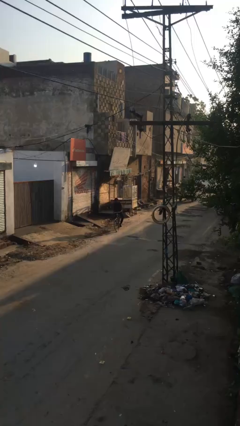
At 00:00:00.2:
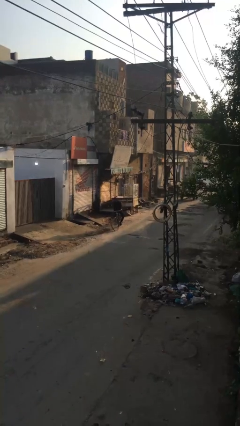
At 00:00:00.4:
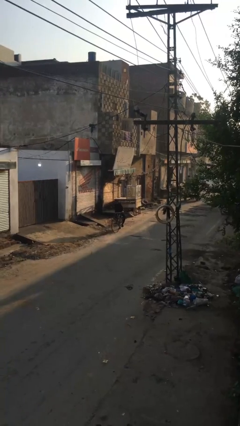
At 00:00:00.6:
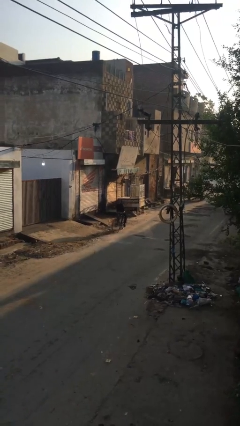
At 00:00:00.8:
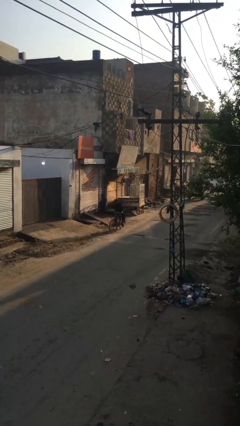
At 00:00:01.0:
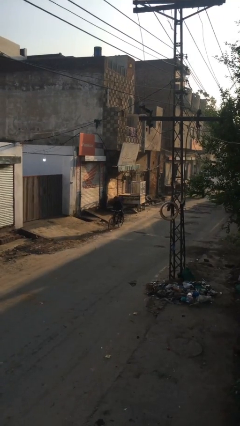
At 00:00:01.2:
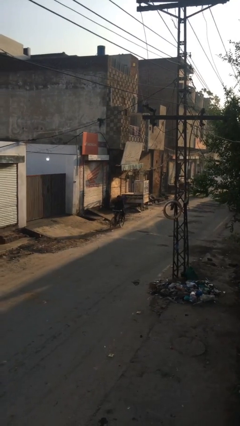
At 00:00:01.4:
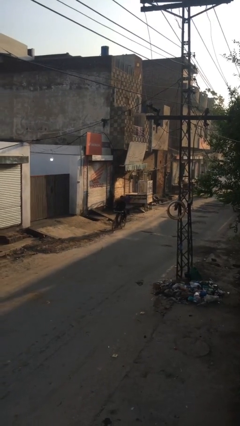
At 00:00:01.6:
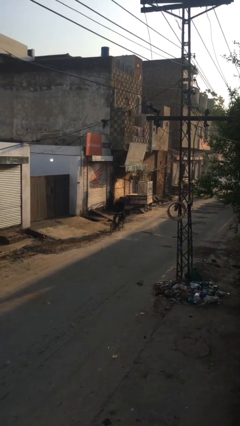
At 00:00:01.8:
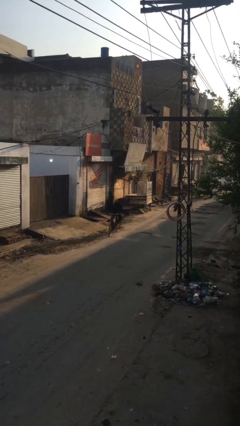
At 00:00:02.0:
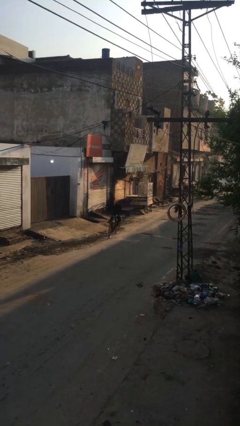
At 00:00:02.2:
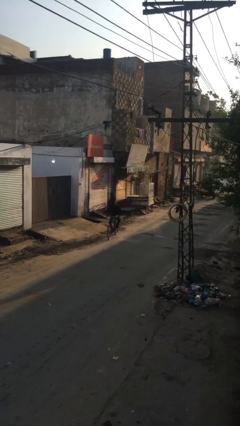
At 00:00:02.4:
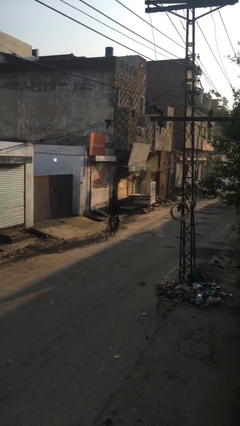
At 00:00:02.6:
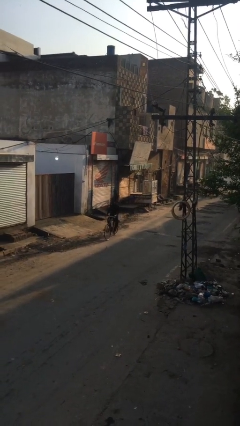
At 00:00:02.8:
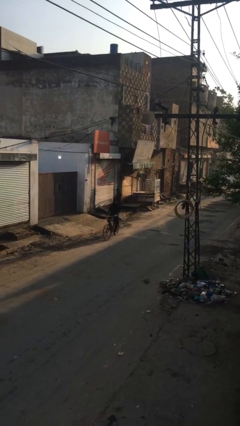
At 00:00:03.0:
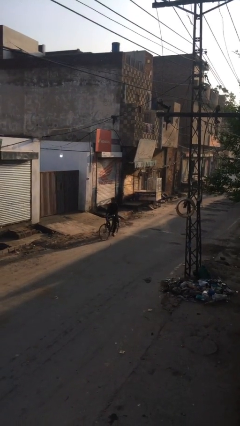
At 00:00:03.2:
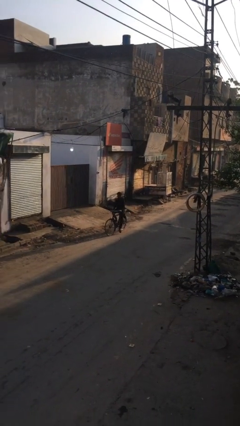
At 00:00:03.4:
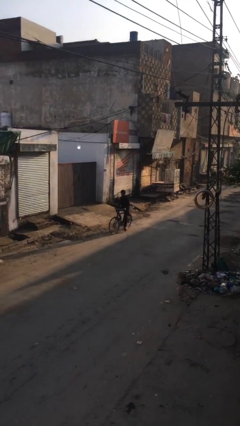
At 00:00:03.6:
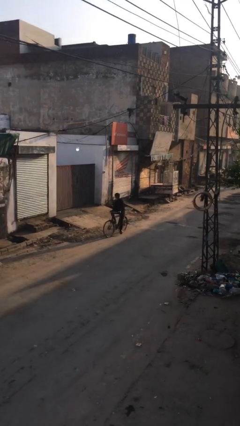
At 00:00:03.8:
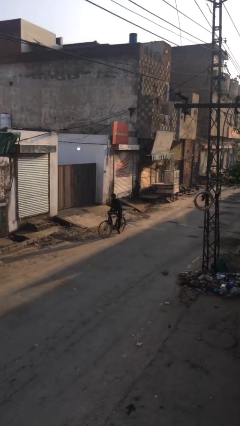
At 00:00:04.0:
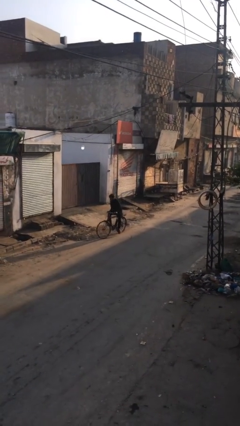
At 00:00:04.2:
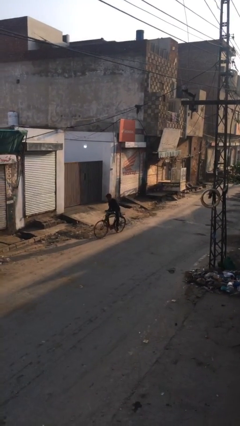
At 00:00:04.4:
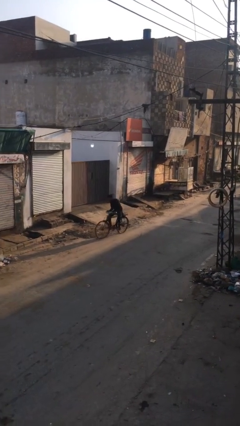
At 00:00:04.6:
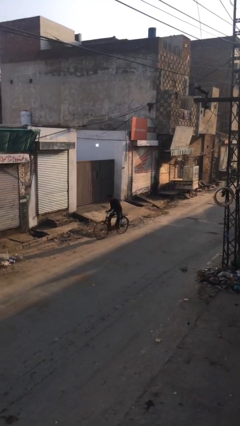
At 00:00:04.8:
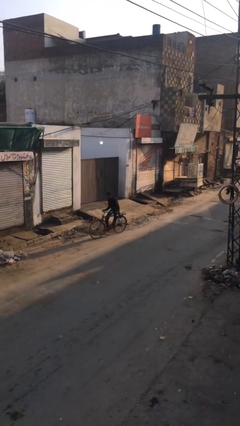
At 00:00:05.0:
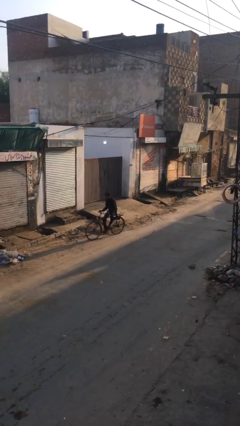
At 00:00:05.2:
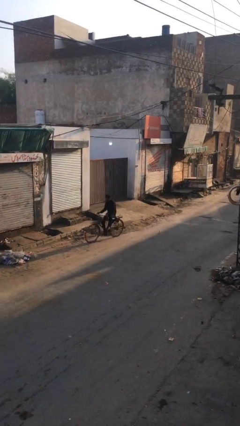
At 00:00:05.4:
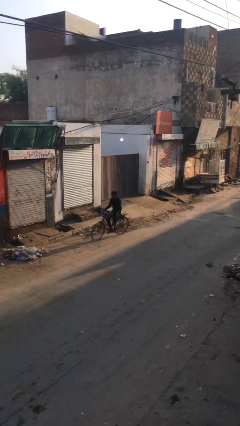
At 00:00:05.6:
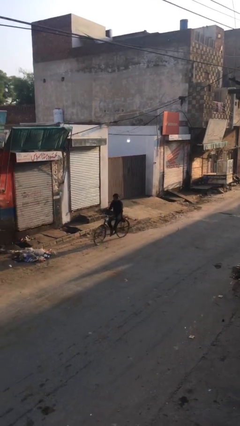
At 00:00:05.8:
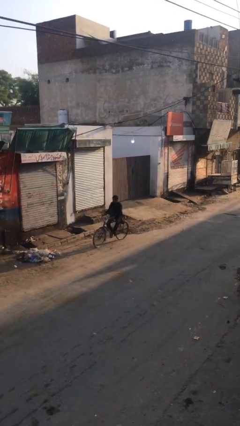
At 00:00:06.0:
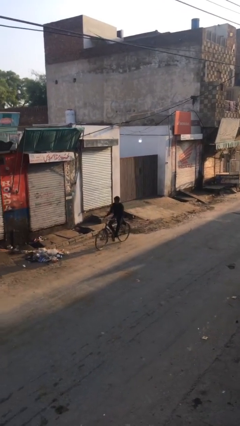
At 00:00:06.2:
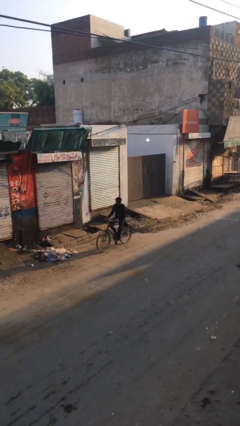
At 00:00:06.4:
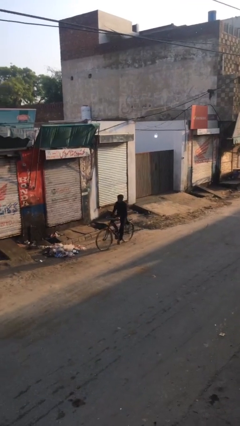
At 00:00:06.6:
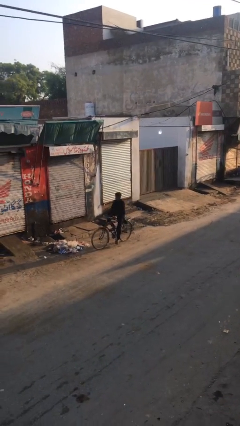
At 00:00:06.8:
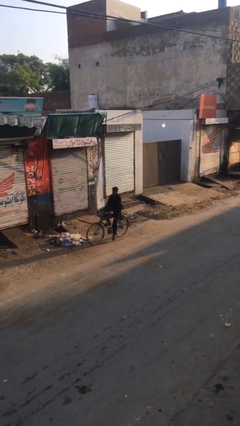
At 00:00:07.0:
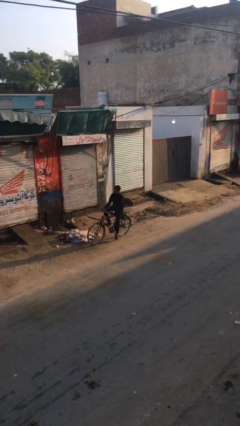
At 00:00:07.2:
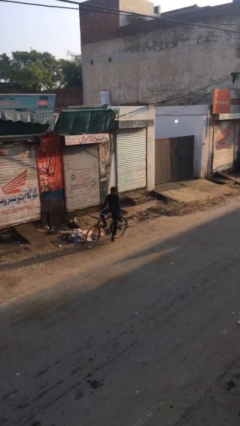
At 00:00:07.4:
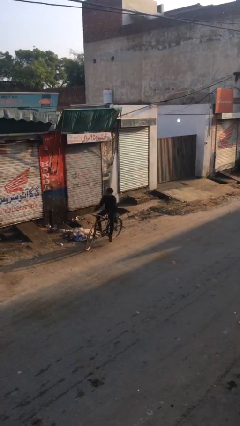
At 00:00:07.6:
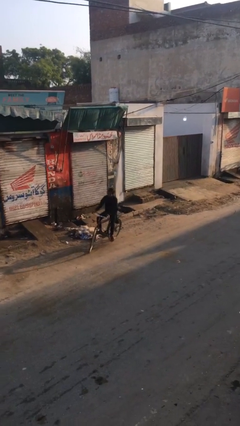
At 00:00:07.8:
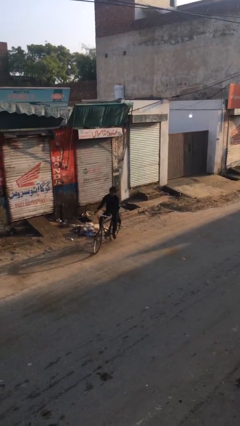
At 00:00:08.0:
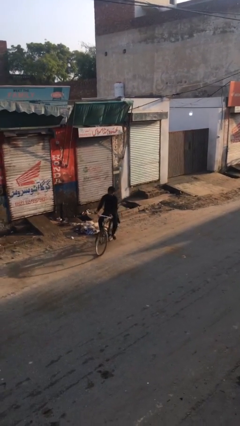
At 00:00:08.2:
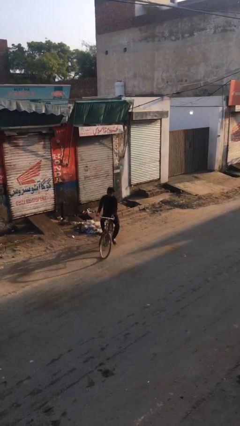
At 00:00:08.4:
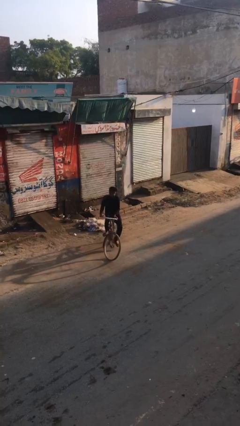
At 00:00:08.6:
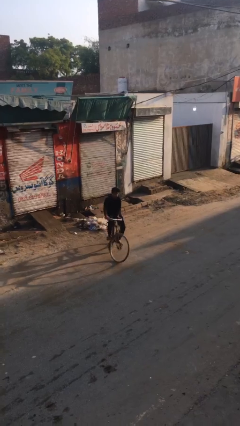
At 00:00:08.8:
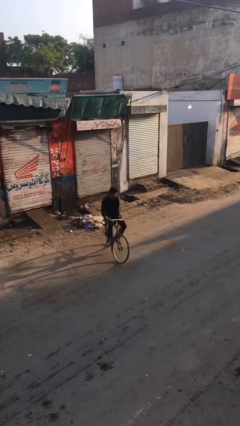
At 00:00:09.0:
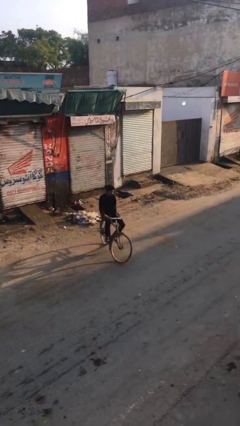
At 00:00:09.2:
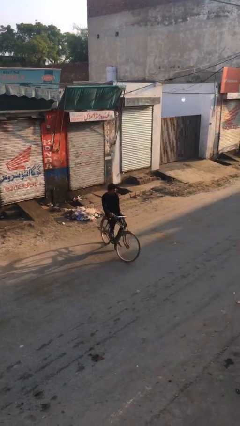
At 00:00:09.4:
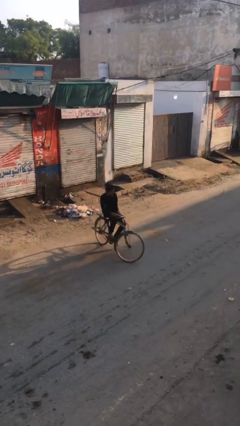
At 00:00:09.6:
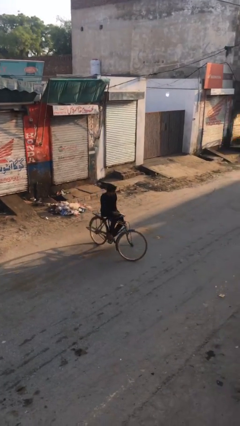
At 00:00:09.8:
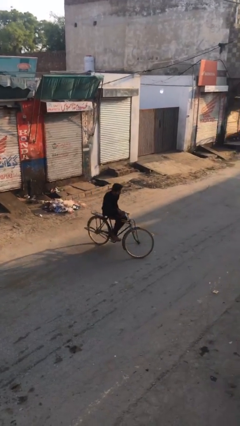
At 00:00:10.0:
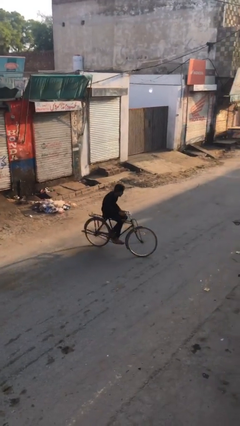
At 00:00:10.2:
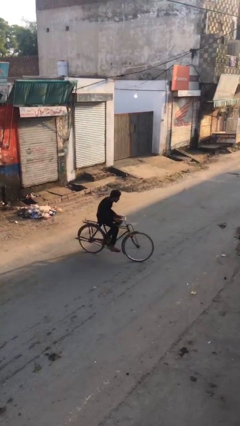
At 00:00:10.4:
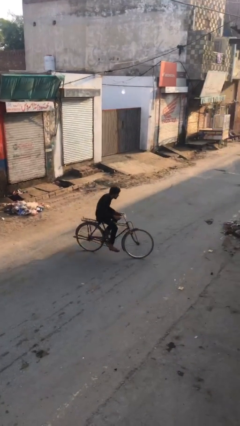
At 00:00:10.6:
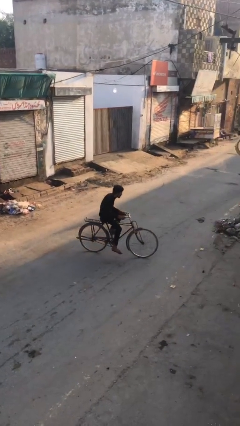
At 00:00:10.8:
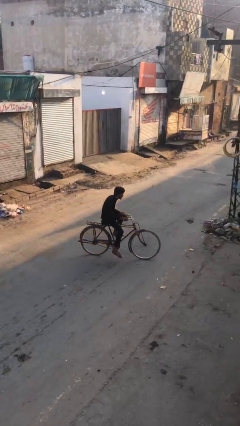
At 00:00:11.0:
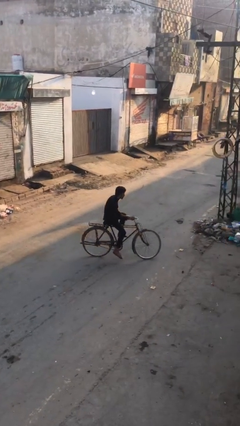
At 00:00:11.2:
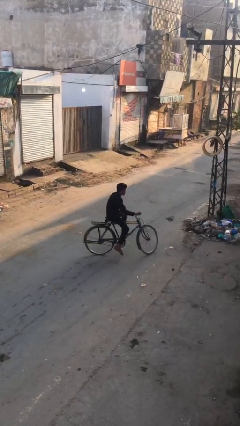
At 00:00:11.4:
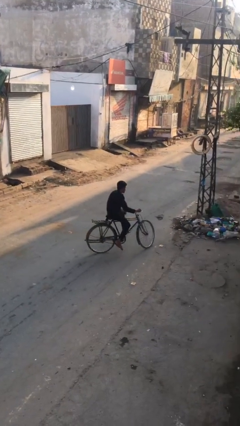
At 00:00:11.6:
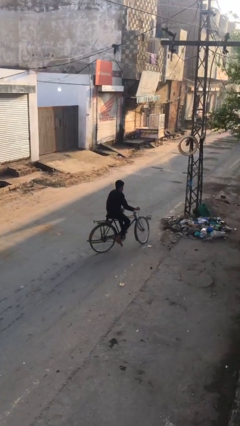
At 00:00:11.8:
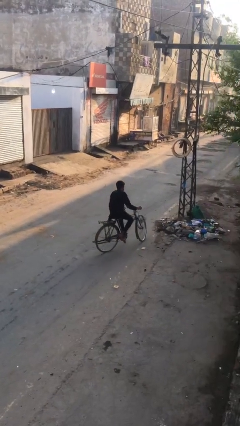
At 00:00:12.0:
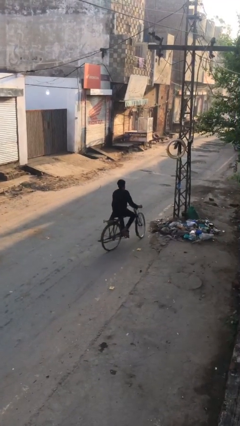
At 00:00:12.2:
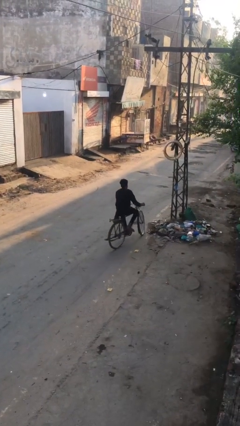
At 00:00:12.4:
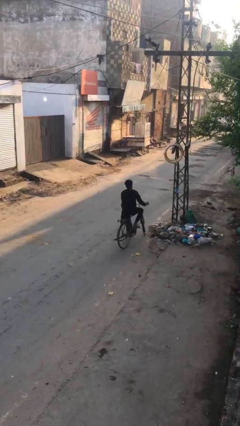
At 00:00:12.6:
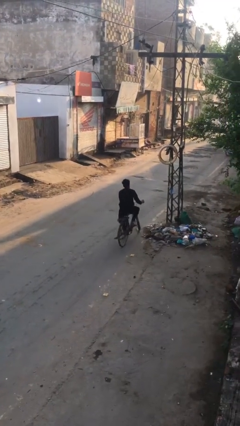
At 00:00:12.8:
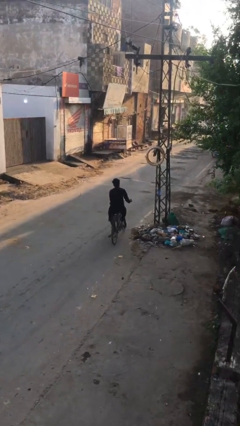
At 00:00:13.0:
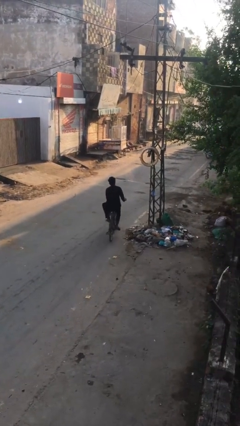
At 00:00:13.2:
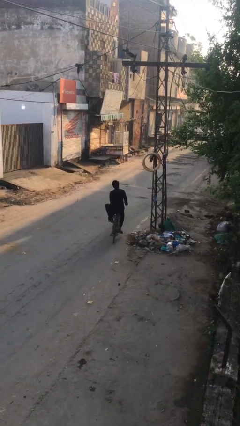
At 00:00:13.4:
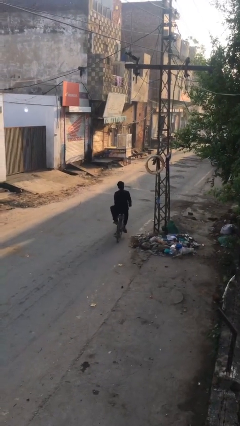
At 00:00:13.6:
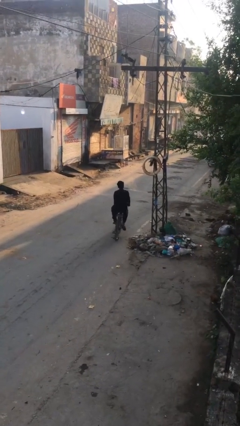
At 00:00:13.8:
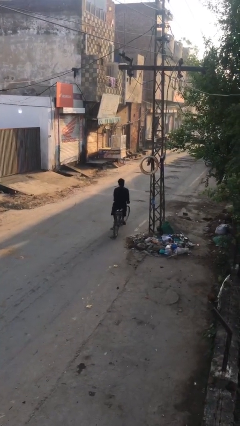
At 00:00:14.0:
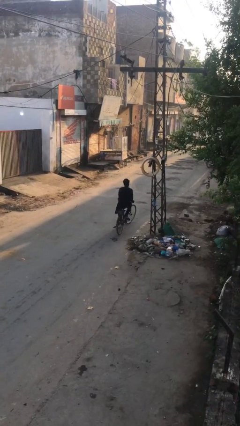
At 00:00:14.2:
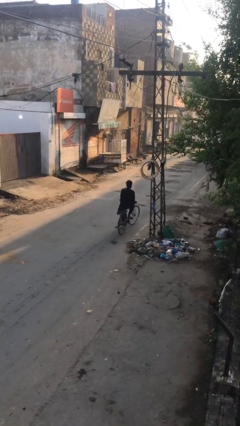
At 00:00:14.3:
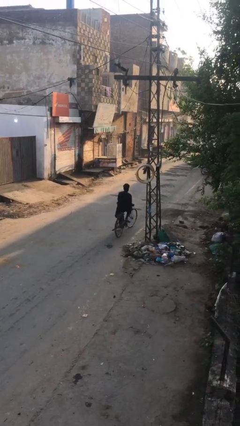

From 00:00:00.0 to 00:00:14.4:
person rides bicycle

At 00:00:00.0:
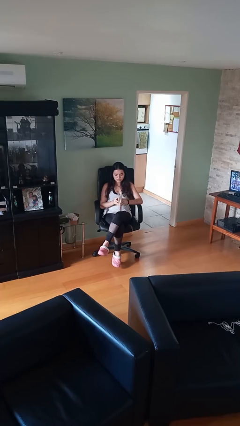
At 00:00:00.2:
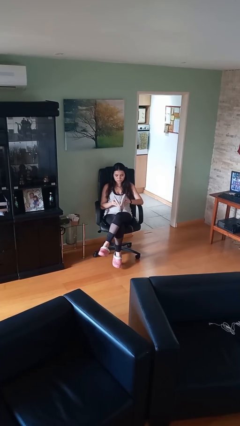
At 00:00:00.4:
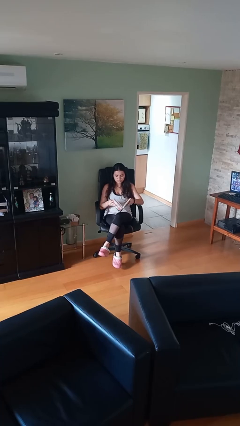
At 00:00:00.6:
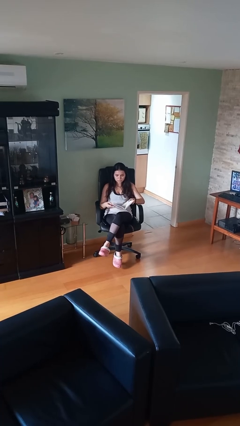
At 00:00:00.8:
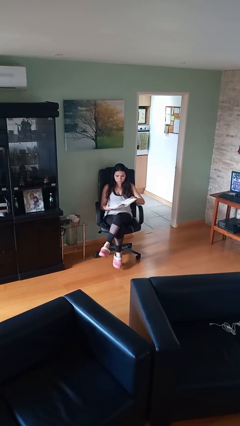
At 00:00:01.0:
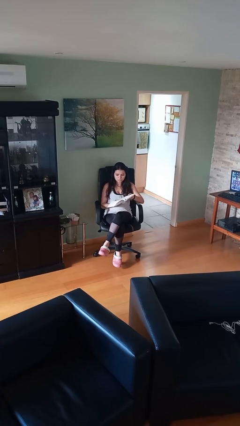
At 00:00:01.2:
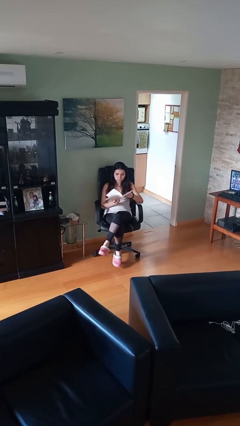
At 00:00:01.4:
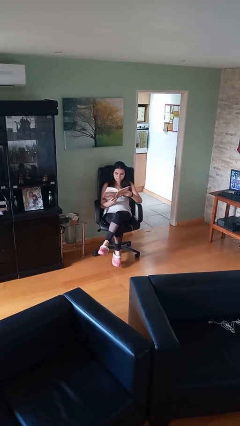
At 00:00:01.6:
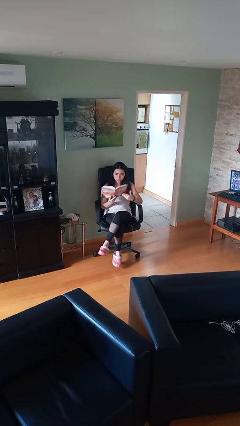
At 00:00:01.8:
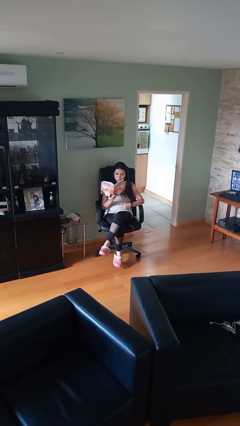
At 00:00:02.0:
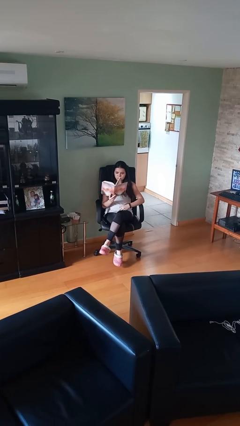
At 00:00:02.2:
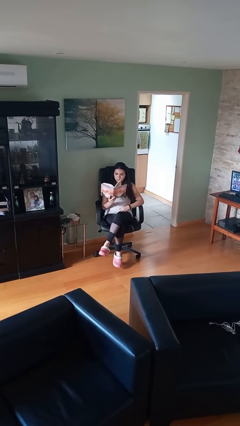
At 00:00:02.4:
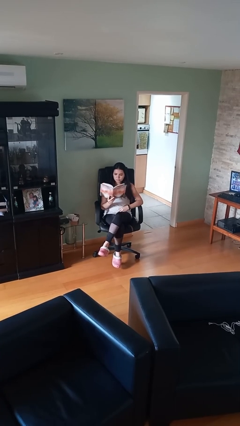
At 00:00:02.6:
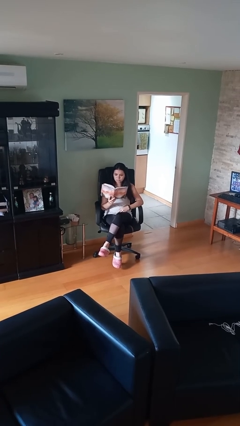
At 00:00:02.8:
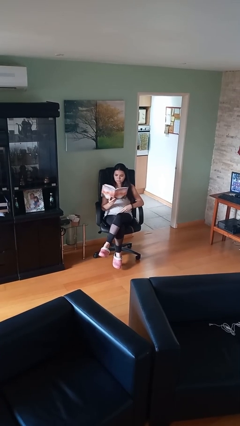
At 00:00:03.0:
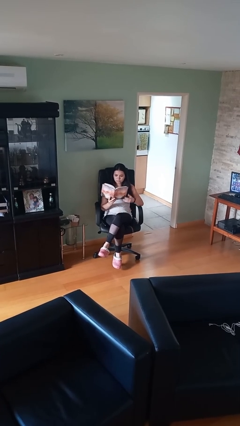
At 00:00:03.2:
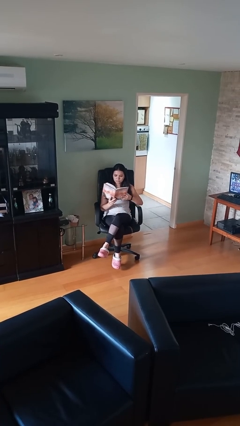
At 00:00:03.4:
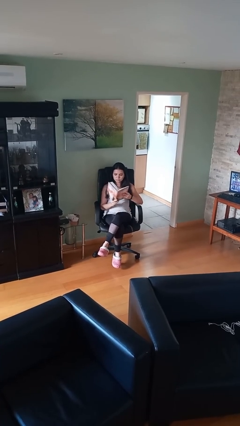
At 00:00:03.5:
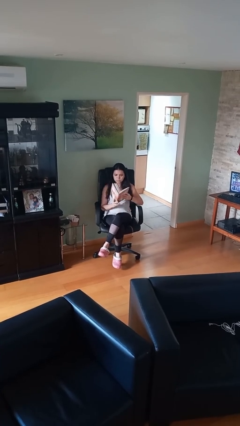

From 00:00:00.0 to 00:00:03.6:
person reads document
